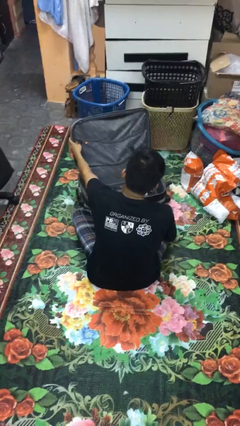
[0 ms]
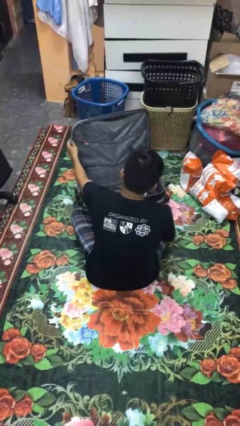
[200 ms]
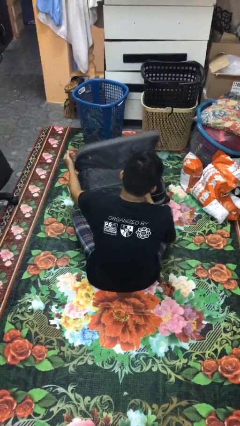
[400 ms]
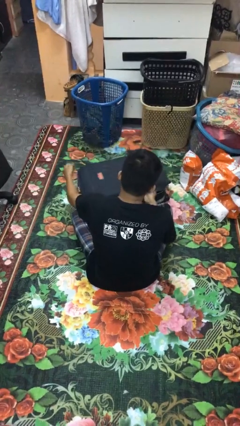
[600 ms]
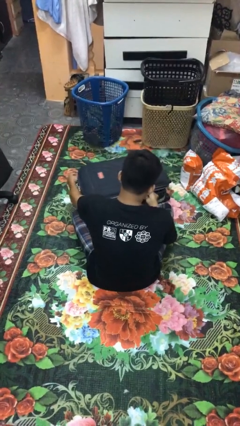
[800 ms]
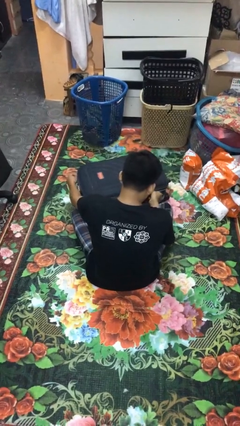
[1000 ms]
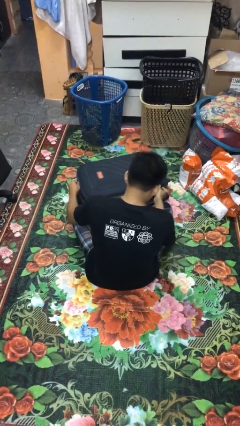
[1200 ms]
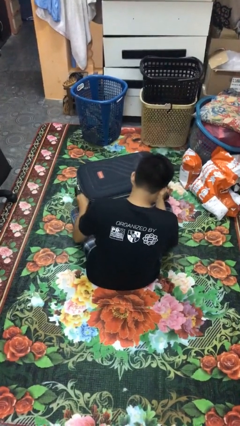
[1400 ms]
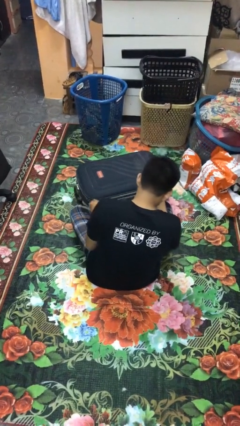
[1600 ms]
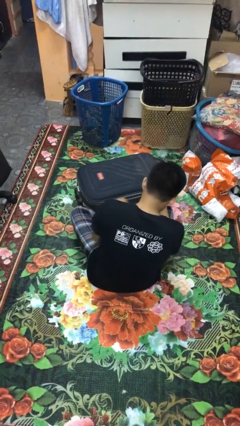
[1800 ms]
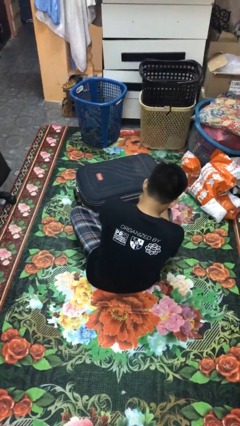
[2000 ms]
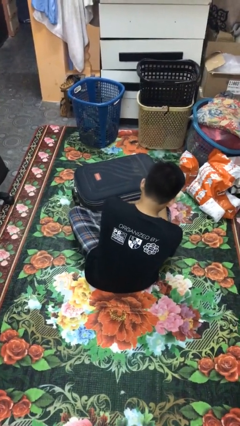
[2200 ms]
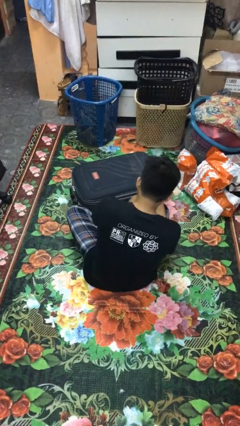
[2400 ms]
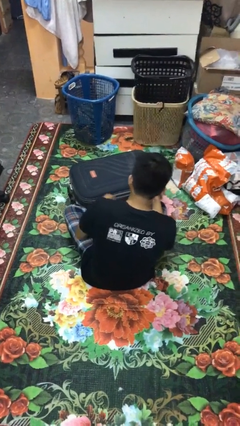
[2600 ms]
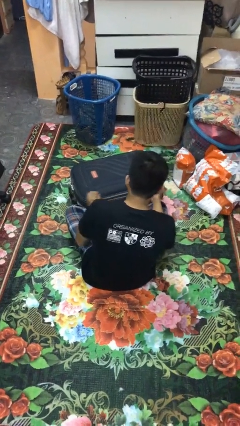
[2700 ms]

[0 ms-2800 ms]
person closes suitcase

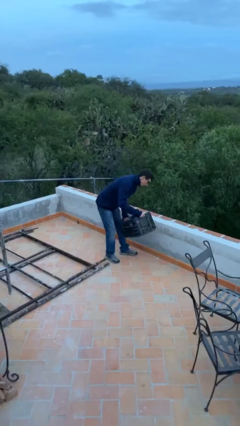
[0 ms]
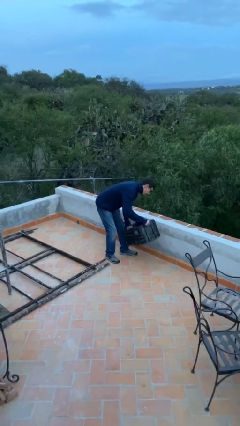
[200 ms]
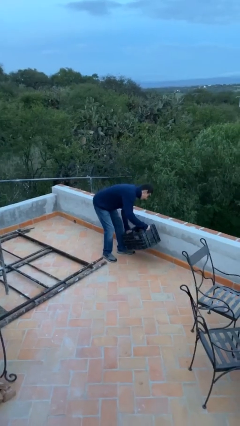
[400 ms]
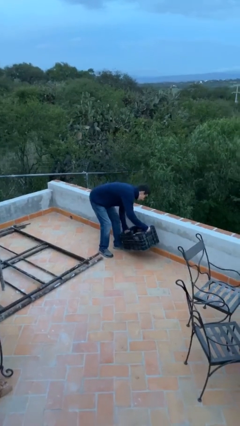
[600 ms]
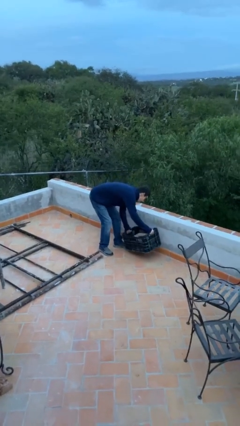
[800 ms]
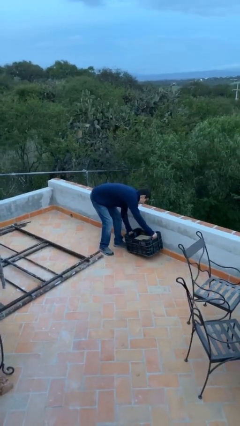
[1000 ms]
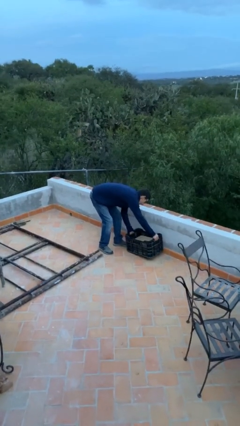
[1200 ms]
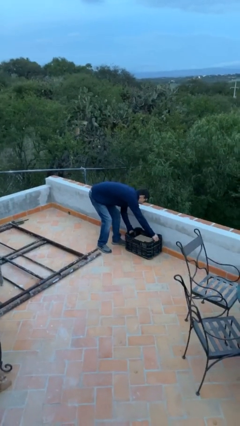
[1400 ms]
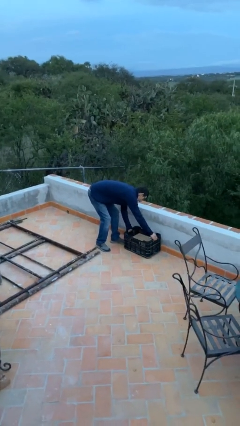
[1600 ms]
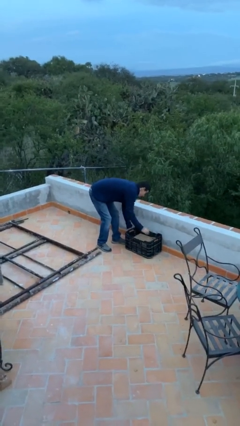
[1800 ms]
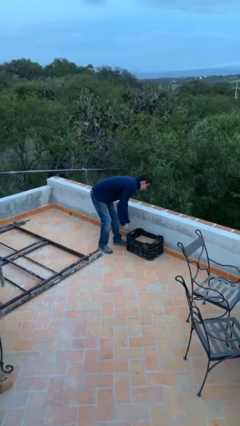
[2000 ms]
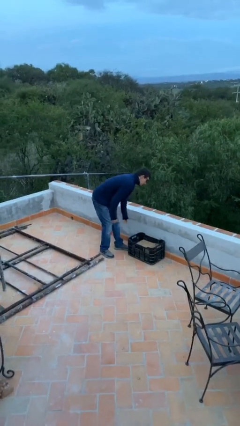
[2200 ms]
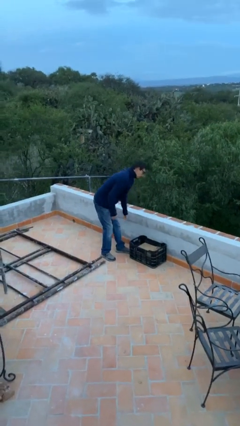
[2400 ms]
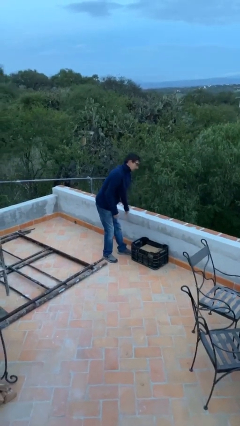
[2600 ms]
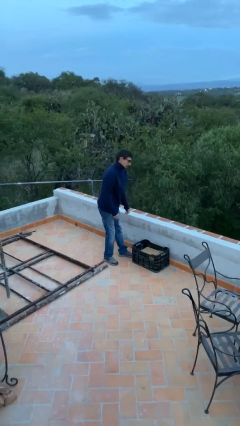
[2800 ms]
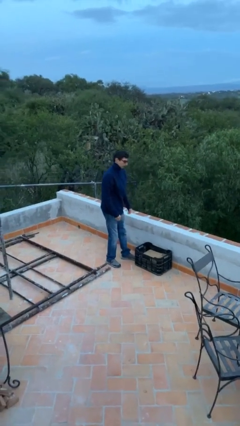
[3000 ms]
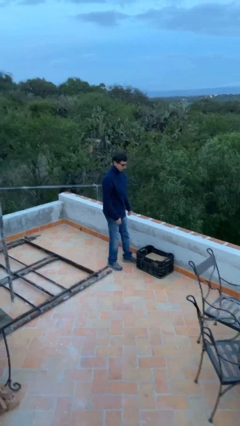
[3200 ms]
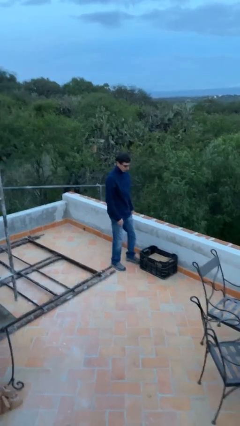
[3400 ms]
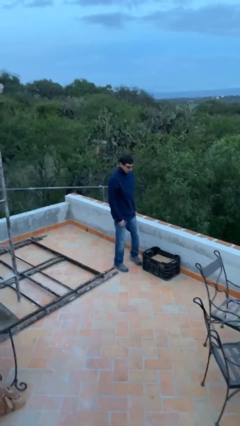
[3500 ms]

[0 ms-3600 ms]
person puts down object on floor

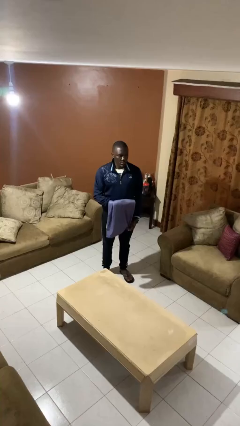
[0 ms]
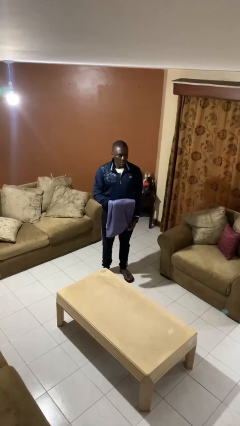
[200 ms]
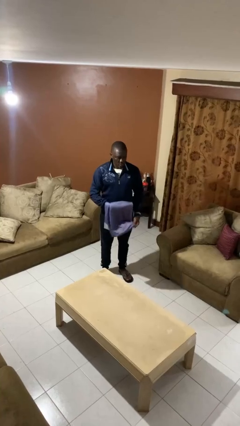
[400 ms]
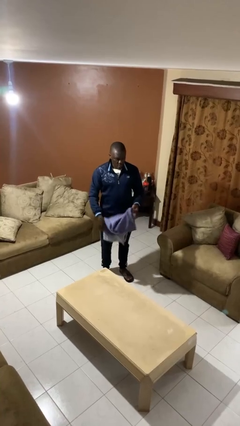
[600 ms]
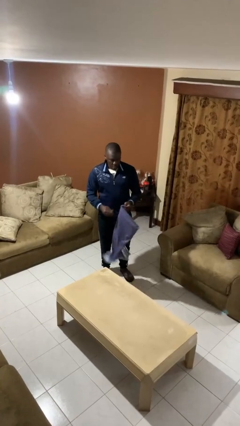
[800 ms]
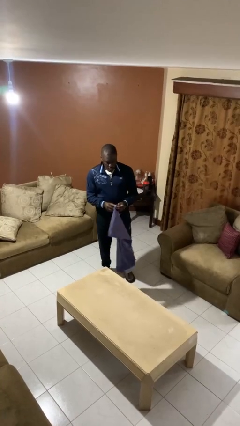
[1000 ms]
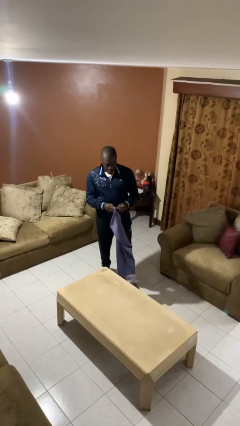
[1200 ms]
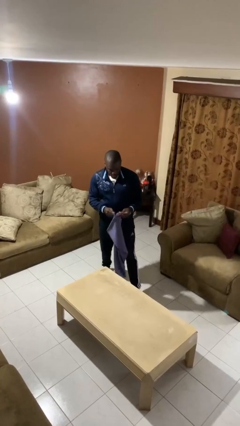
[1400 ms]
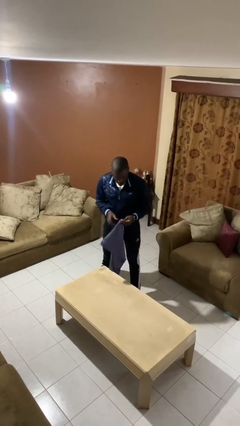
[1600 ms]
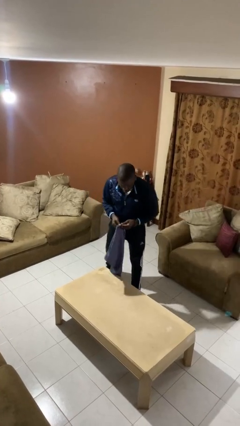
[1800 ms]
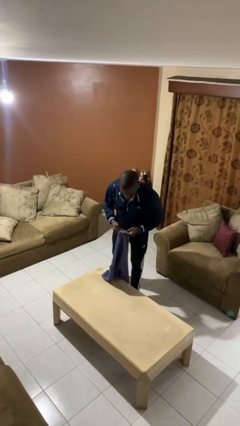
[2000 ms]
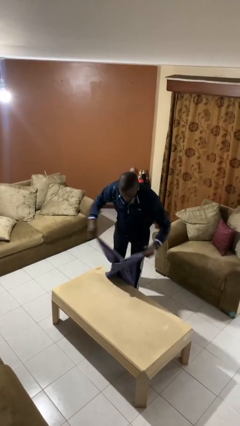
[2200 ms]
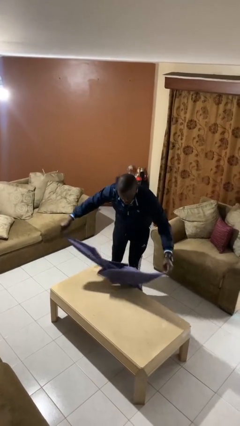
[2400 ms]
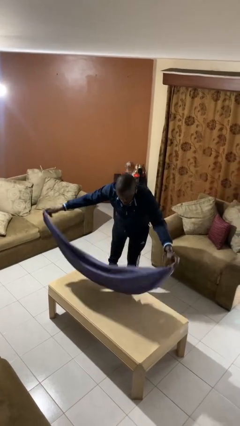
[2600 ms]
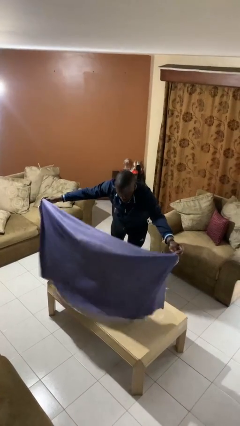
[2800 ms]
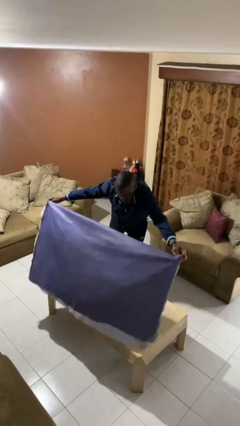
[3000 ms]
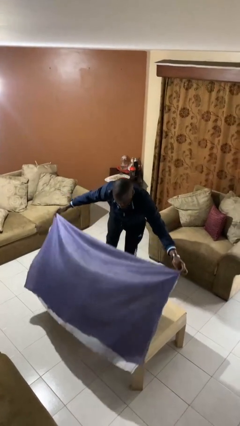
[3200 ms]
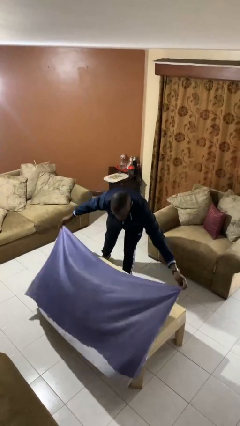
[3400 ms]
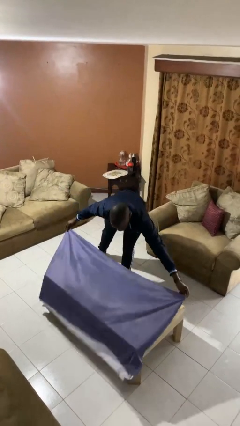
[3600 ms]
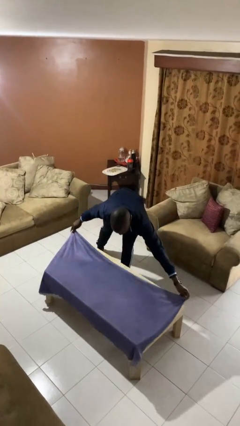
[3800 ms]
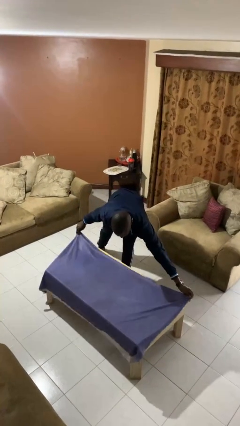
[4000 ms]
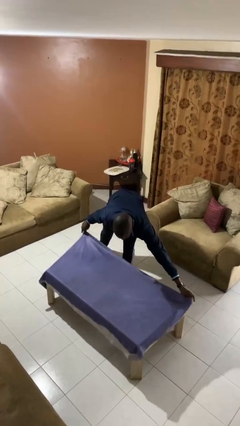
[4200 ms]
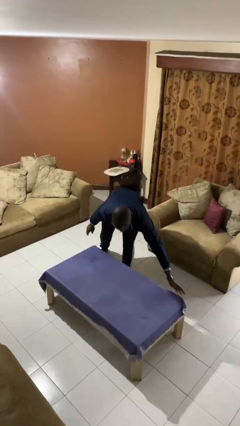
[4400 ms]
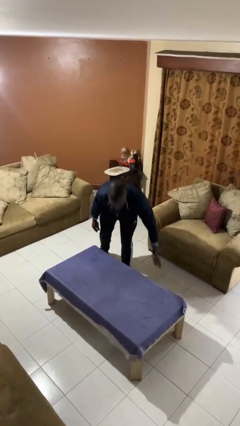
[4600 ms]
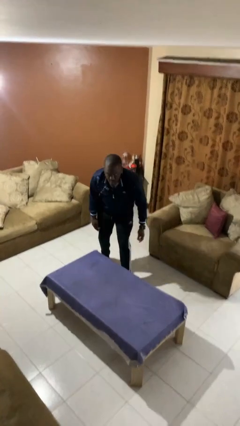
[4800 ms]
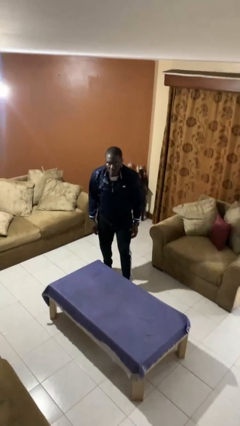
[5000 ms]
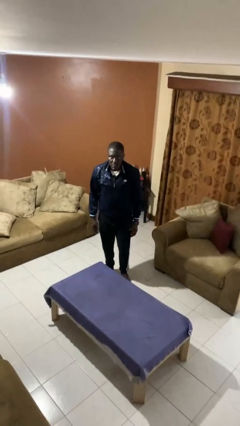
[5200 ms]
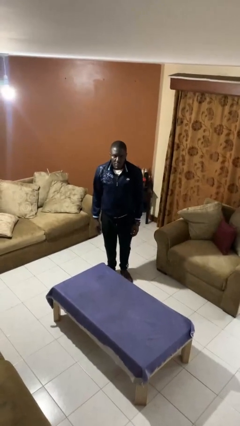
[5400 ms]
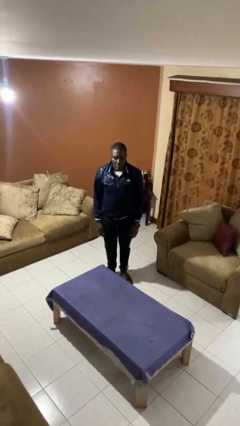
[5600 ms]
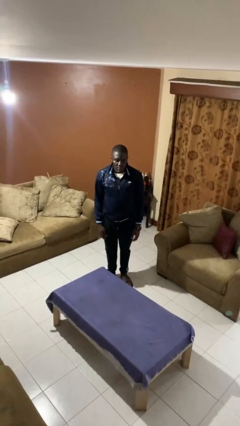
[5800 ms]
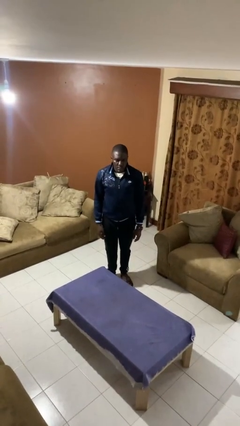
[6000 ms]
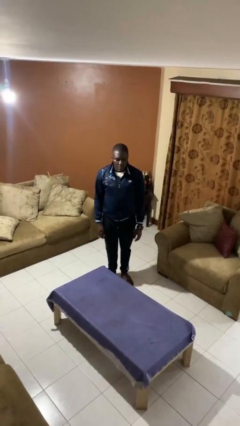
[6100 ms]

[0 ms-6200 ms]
person spreads tablecloth

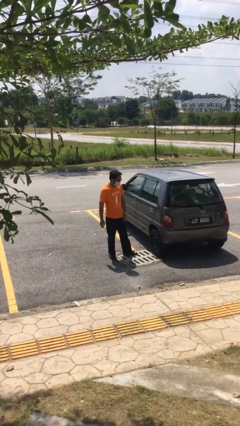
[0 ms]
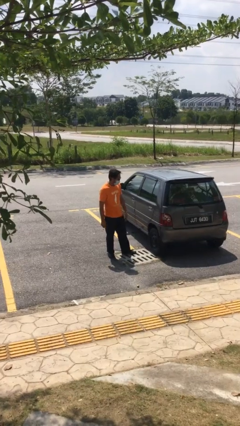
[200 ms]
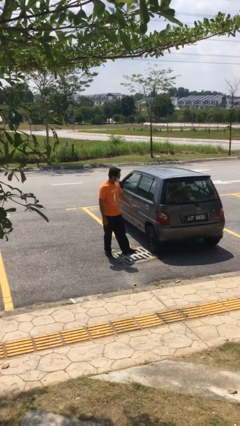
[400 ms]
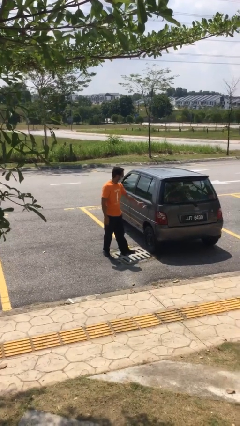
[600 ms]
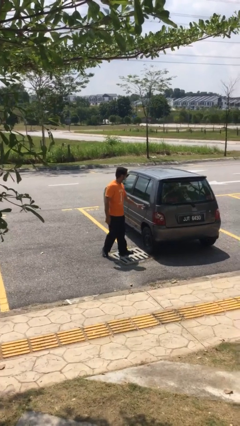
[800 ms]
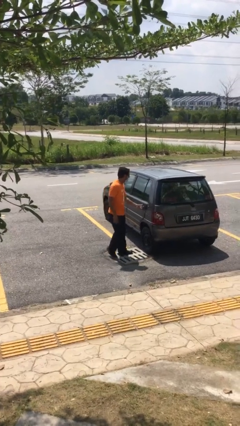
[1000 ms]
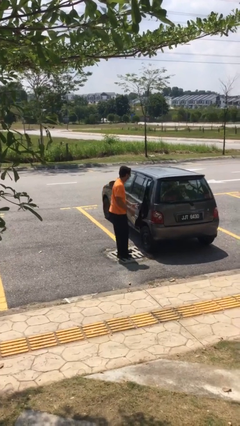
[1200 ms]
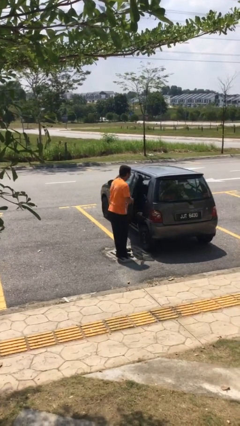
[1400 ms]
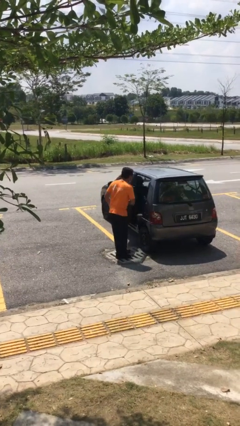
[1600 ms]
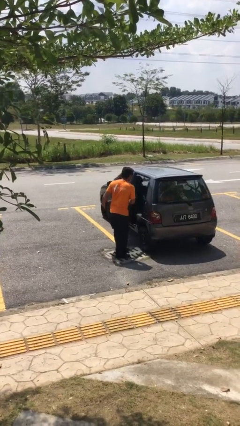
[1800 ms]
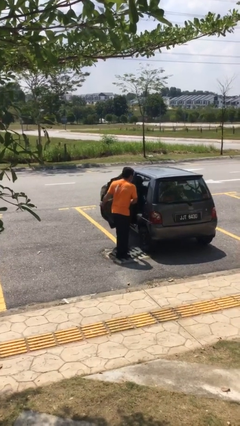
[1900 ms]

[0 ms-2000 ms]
person opens car door

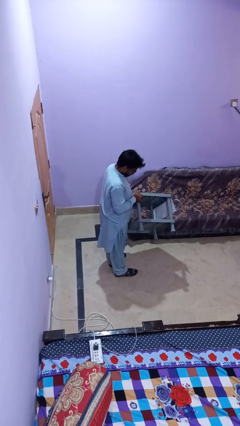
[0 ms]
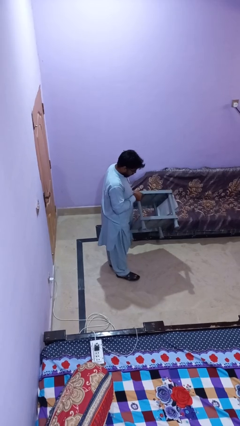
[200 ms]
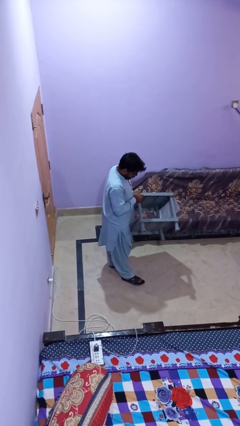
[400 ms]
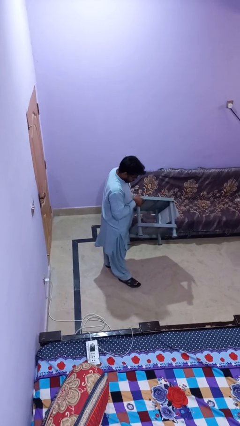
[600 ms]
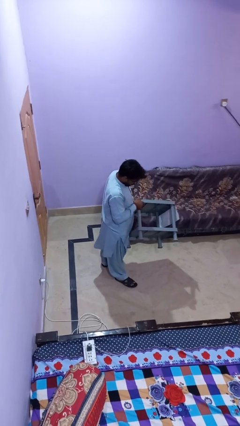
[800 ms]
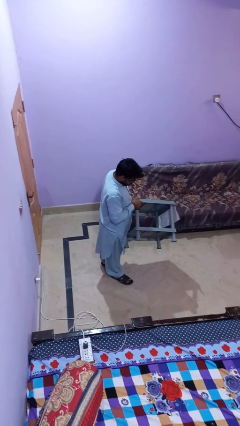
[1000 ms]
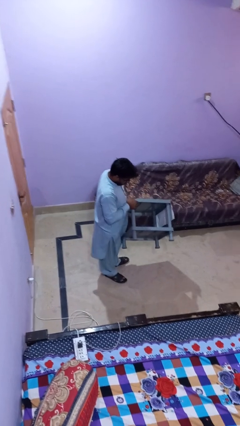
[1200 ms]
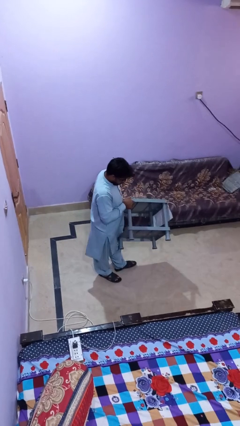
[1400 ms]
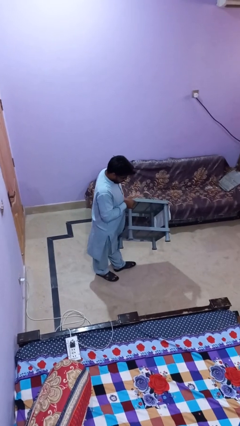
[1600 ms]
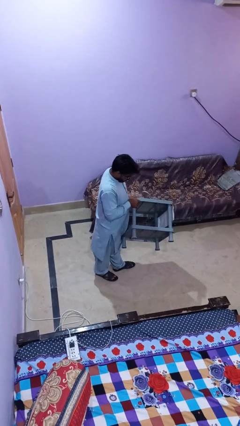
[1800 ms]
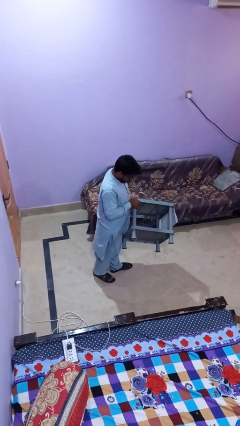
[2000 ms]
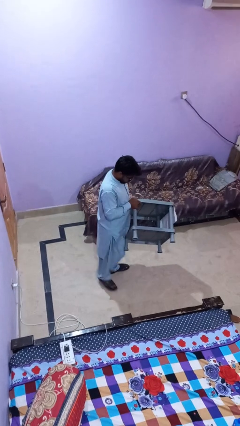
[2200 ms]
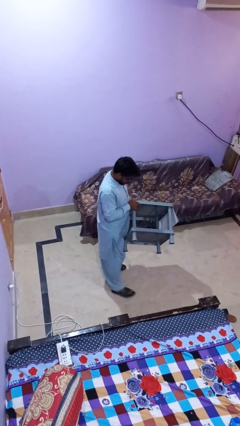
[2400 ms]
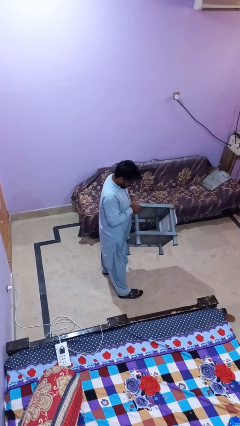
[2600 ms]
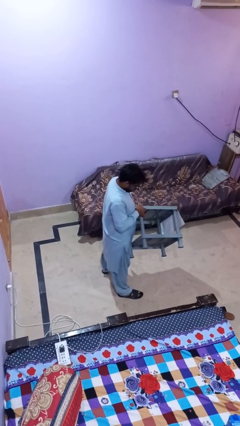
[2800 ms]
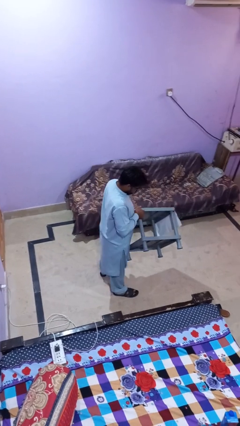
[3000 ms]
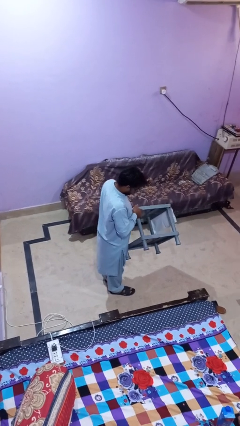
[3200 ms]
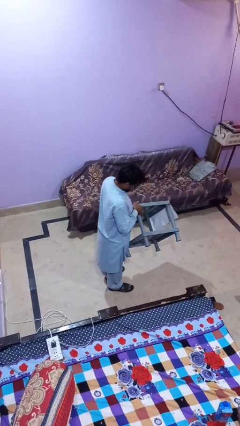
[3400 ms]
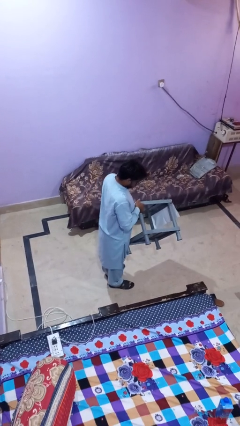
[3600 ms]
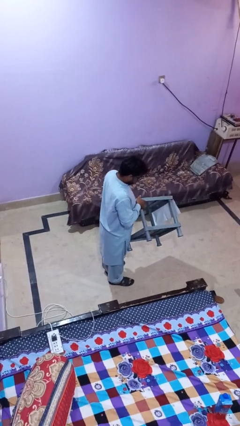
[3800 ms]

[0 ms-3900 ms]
person carries furniture
